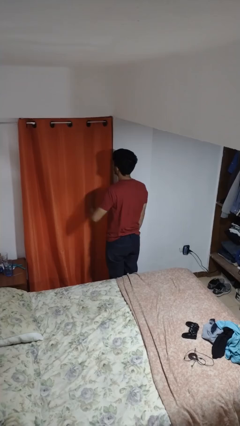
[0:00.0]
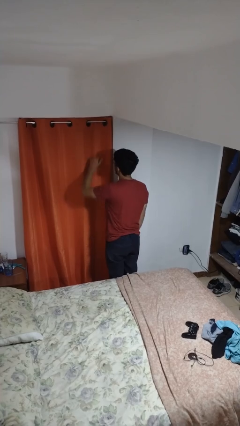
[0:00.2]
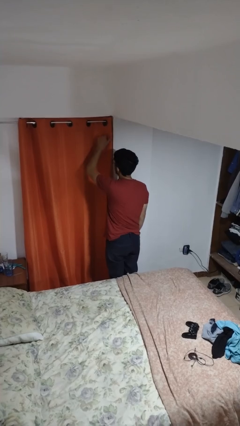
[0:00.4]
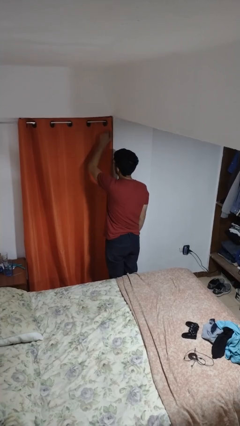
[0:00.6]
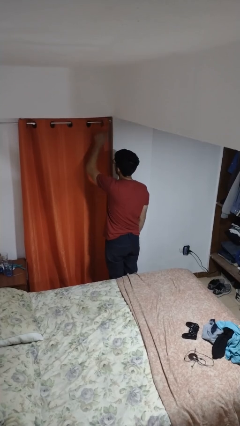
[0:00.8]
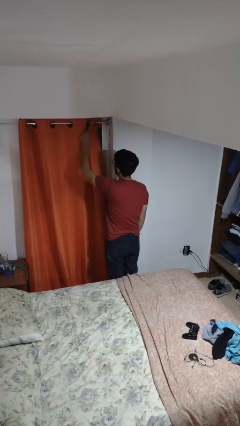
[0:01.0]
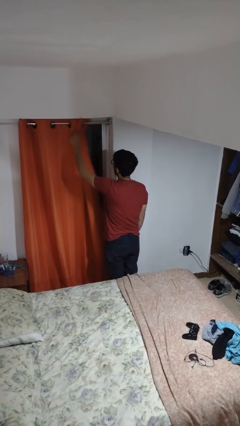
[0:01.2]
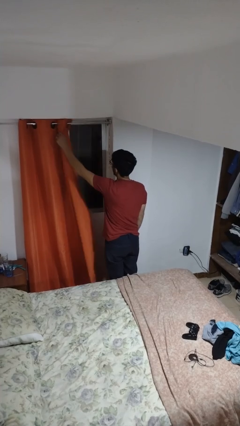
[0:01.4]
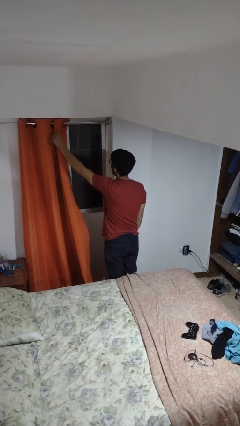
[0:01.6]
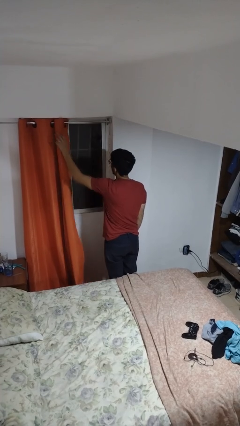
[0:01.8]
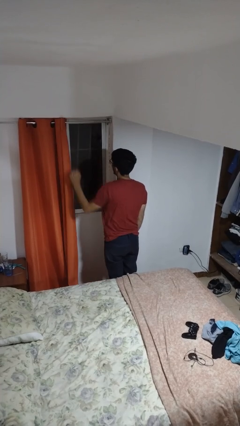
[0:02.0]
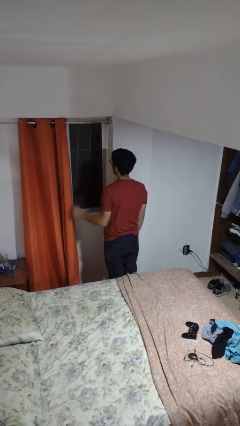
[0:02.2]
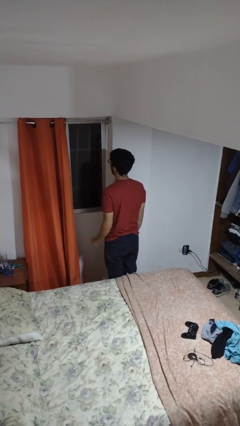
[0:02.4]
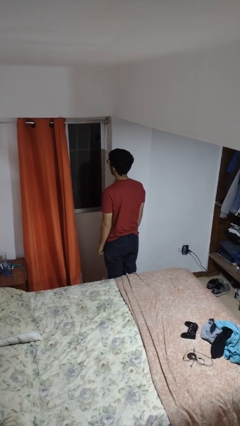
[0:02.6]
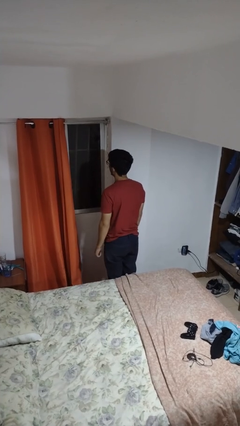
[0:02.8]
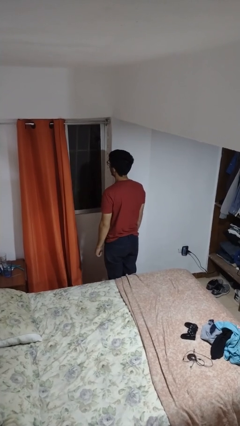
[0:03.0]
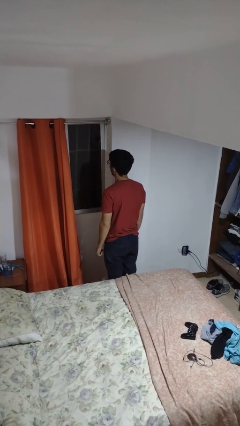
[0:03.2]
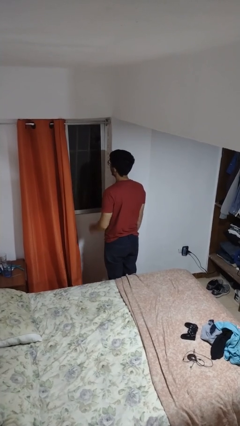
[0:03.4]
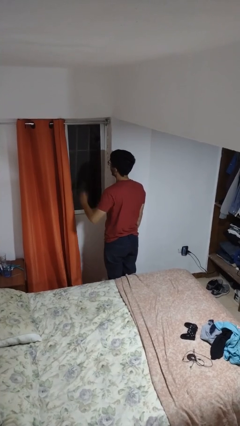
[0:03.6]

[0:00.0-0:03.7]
person opens curtains

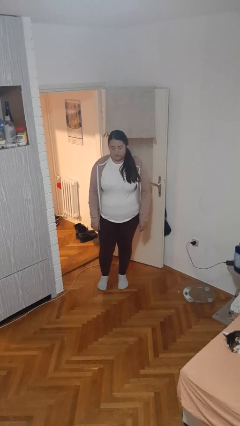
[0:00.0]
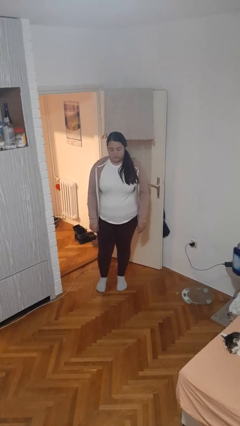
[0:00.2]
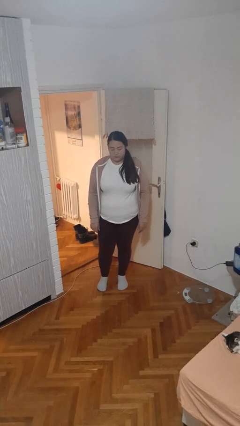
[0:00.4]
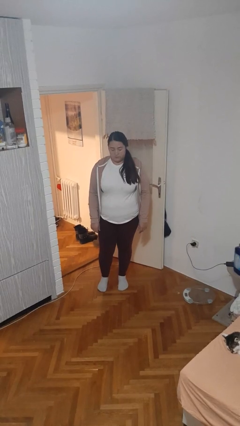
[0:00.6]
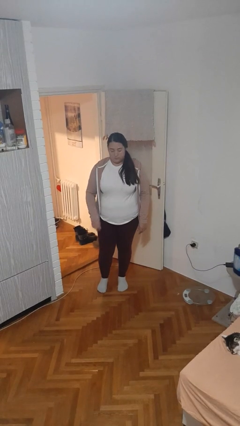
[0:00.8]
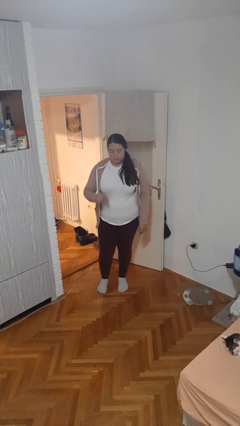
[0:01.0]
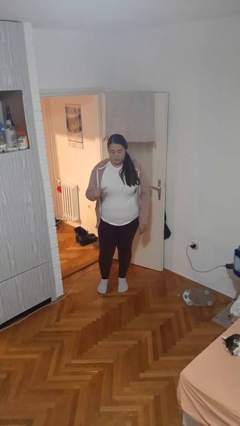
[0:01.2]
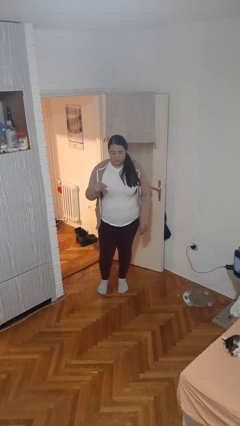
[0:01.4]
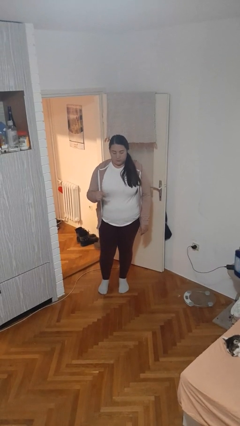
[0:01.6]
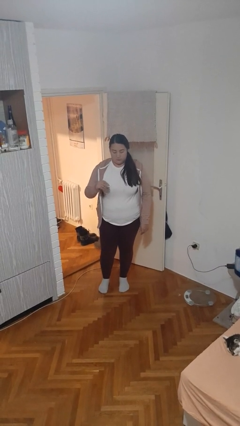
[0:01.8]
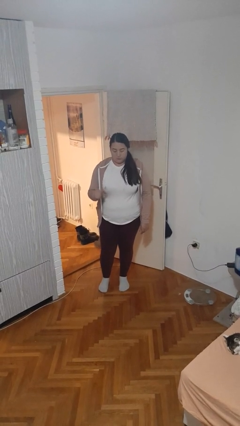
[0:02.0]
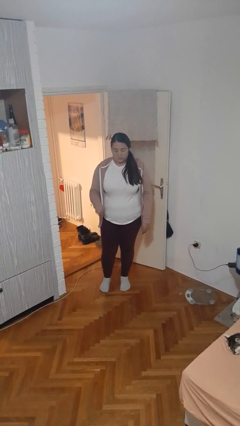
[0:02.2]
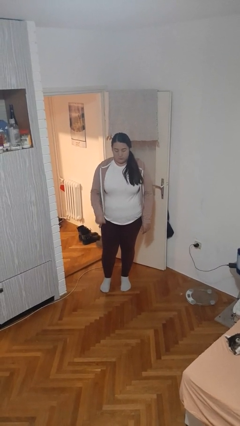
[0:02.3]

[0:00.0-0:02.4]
person snaps fingers

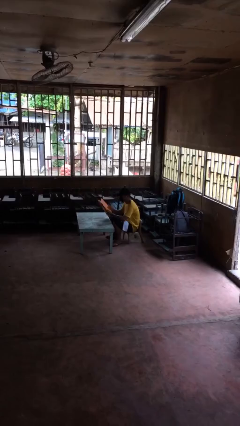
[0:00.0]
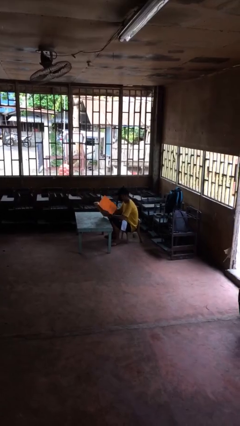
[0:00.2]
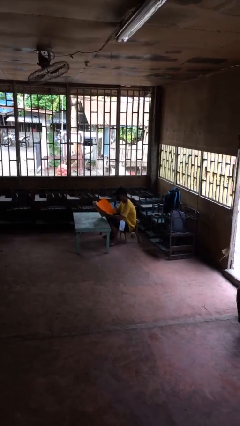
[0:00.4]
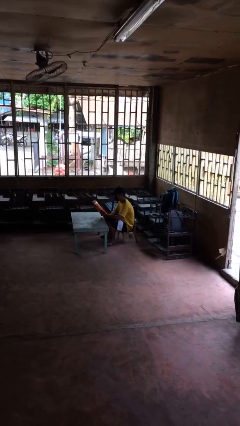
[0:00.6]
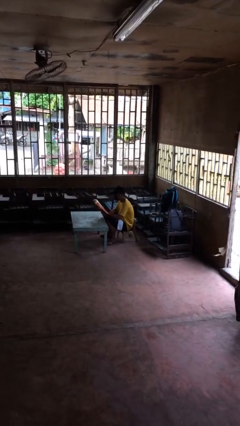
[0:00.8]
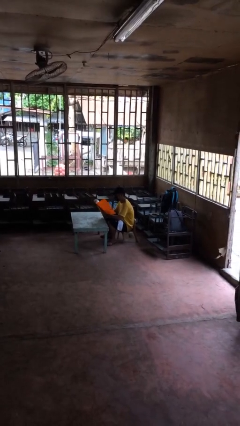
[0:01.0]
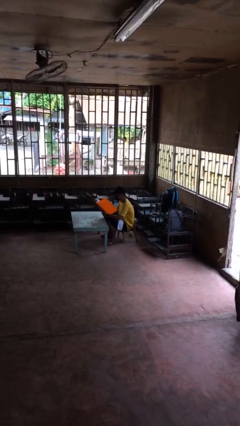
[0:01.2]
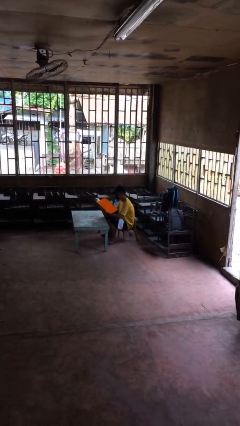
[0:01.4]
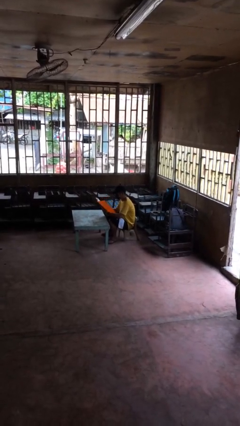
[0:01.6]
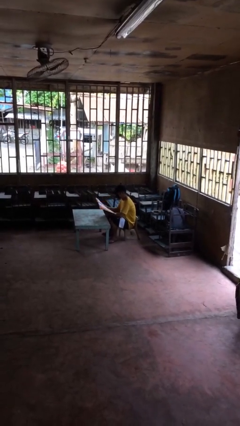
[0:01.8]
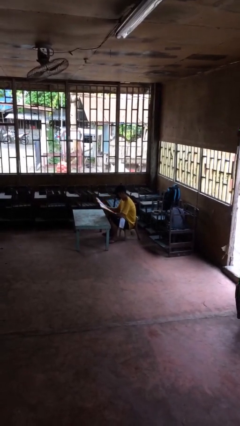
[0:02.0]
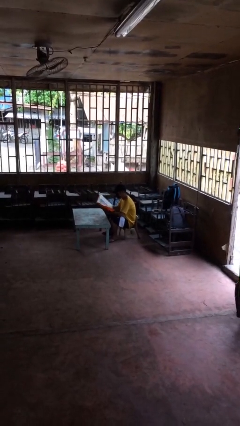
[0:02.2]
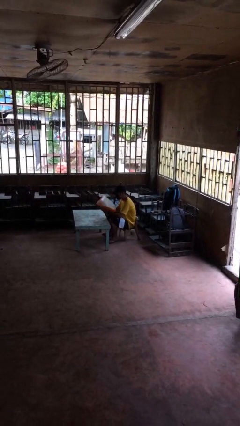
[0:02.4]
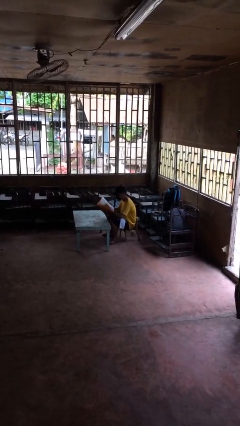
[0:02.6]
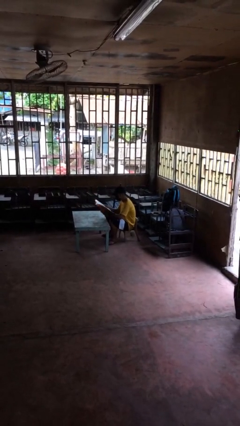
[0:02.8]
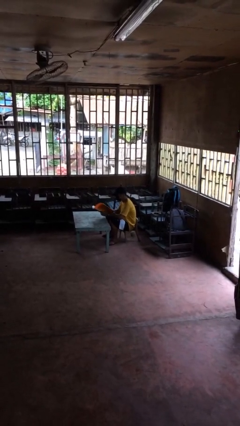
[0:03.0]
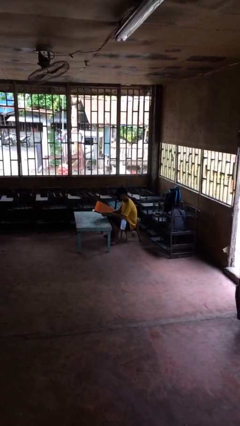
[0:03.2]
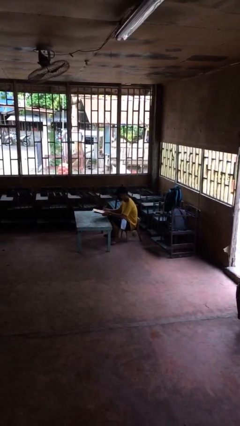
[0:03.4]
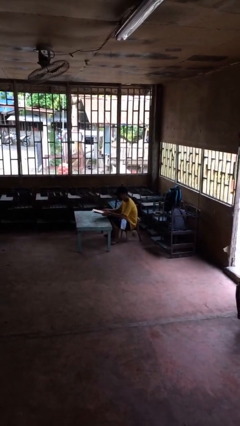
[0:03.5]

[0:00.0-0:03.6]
person reads document

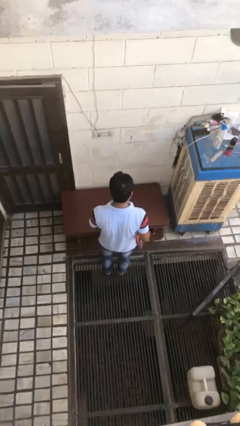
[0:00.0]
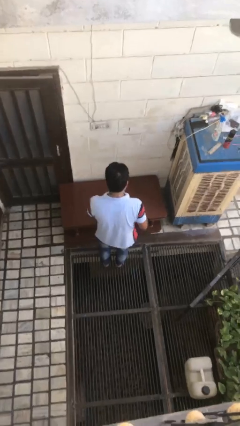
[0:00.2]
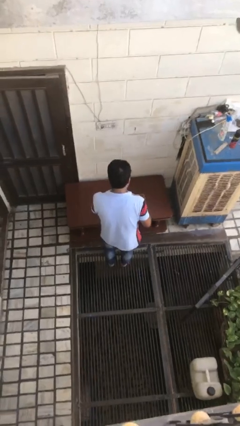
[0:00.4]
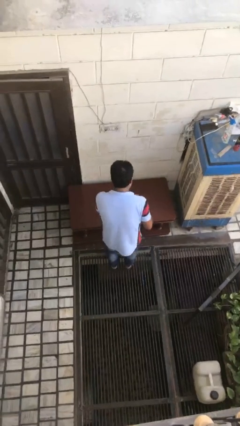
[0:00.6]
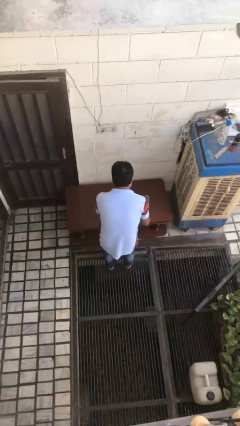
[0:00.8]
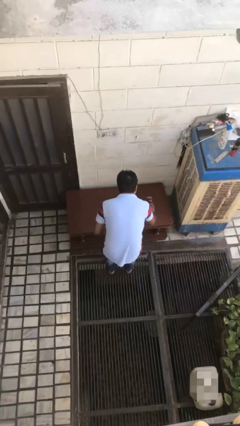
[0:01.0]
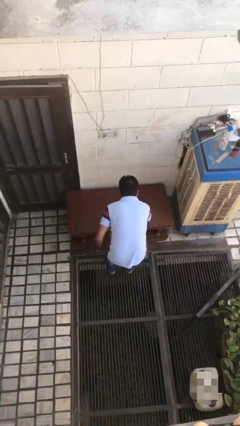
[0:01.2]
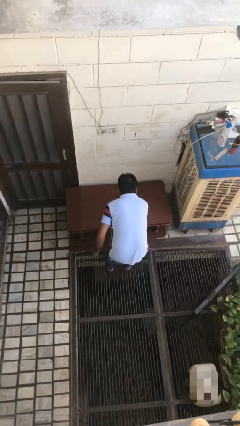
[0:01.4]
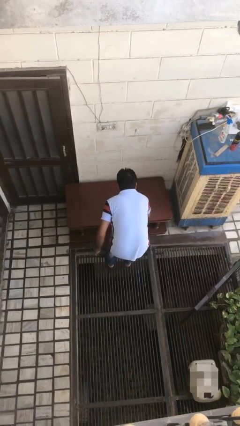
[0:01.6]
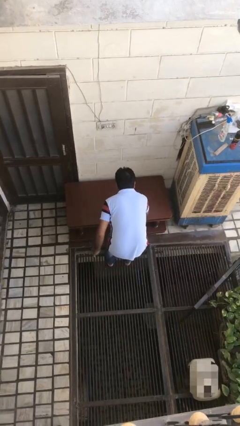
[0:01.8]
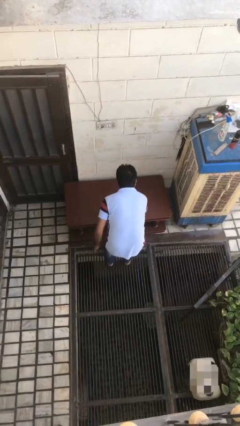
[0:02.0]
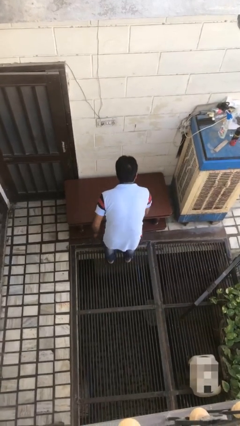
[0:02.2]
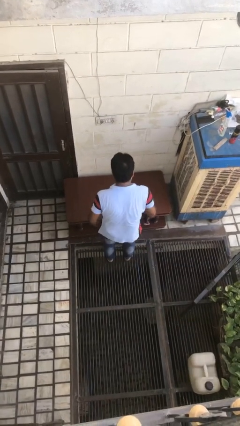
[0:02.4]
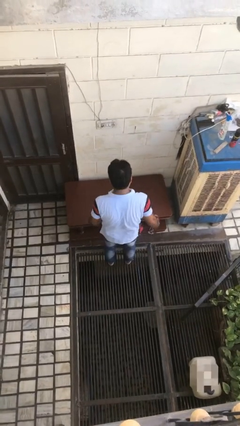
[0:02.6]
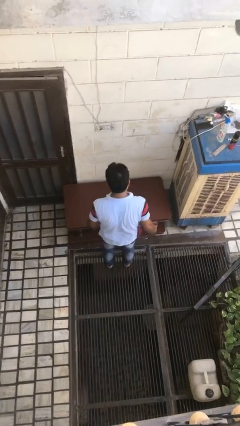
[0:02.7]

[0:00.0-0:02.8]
person cleans table with rag

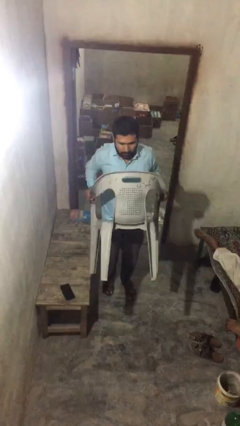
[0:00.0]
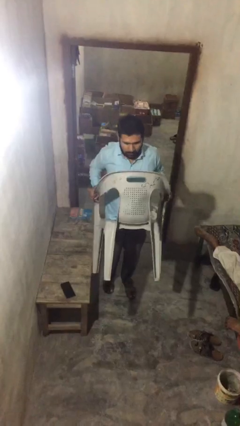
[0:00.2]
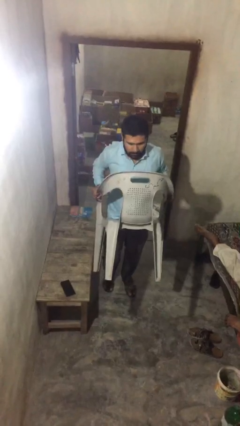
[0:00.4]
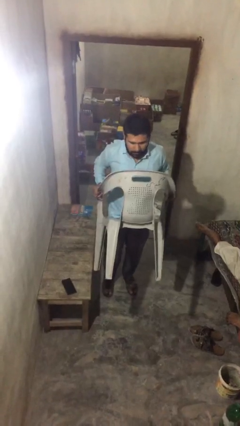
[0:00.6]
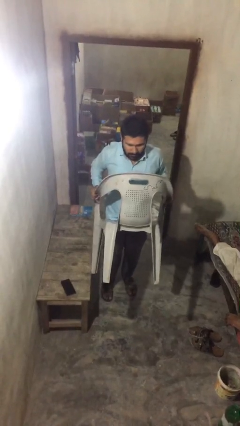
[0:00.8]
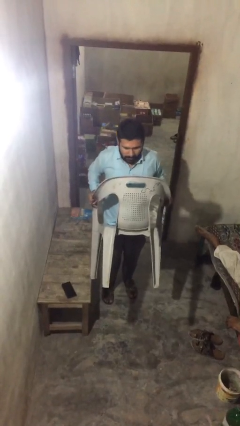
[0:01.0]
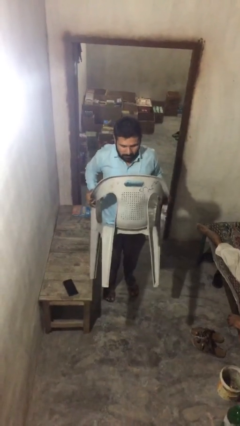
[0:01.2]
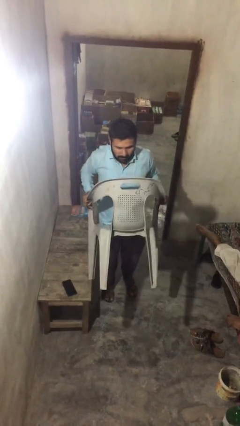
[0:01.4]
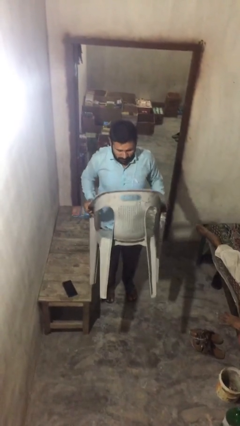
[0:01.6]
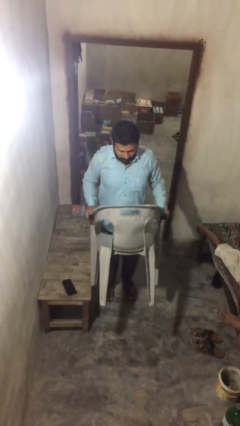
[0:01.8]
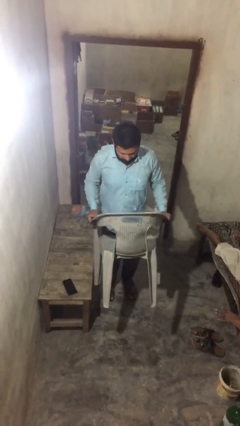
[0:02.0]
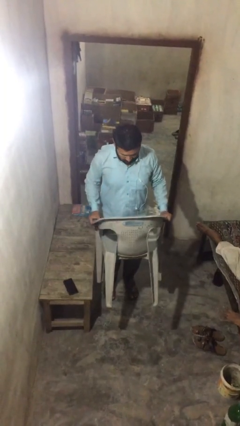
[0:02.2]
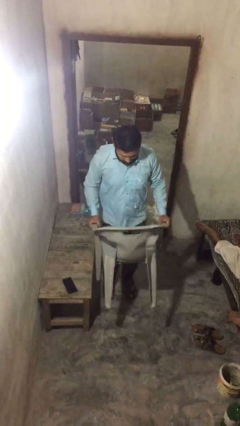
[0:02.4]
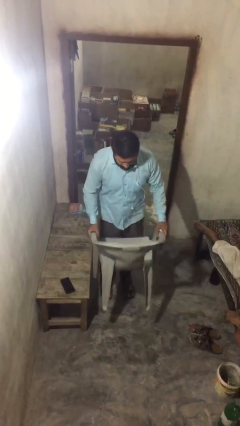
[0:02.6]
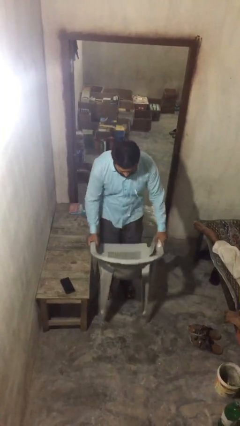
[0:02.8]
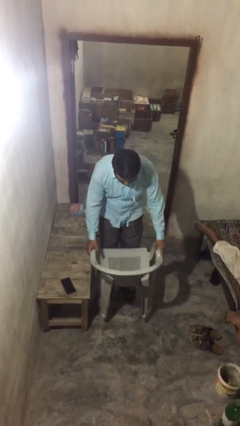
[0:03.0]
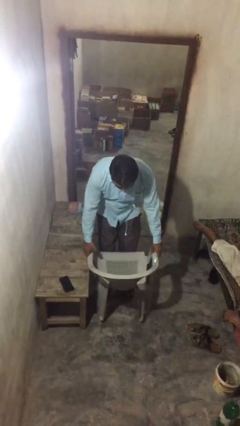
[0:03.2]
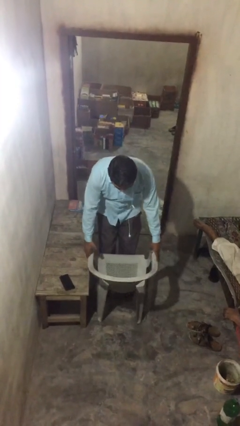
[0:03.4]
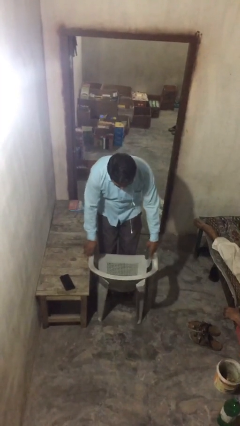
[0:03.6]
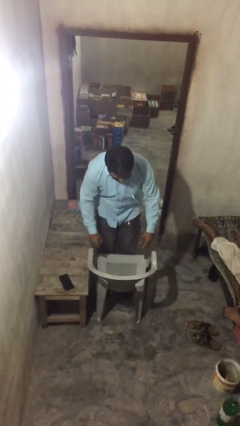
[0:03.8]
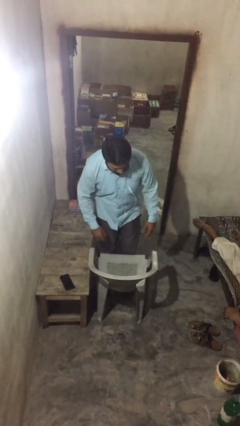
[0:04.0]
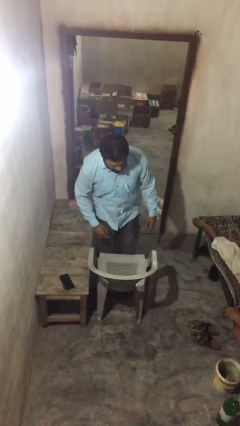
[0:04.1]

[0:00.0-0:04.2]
person puts down object on table

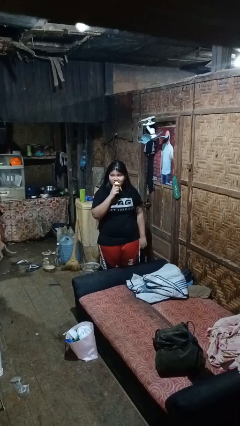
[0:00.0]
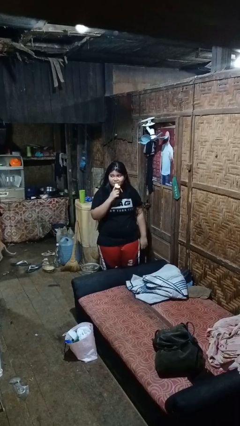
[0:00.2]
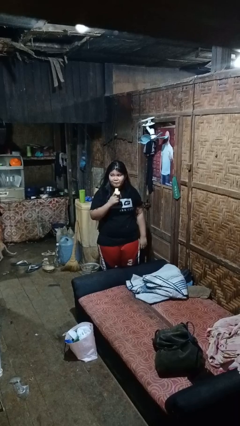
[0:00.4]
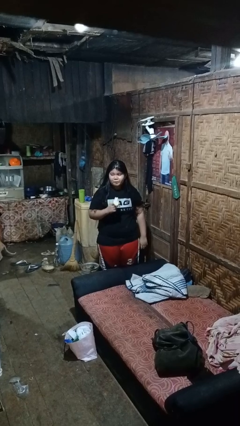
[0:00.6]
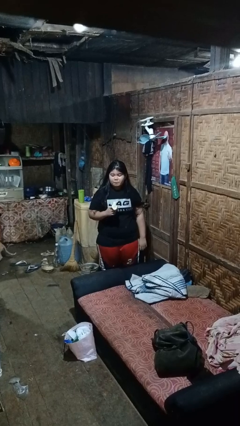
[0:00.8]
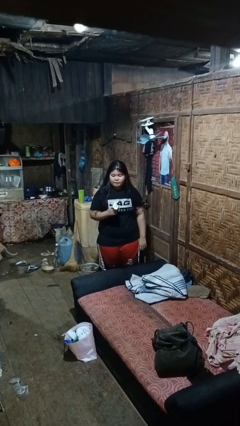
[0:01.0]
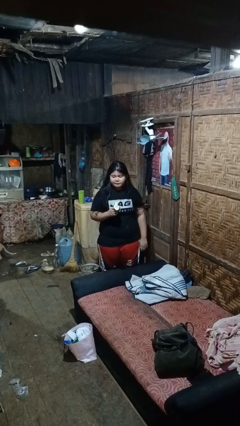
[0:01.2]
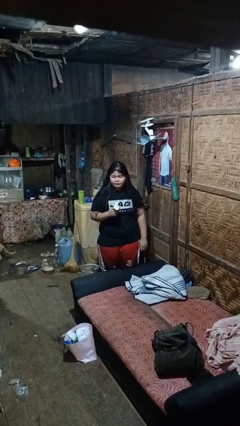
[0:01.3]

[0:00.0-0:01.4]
person eats banana
